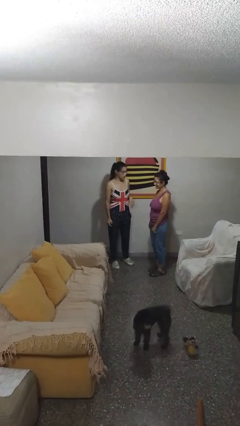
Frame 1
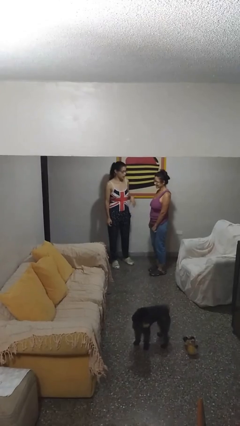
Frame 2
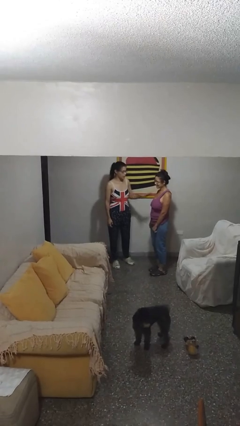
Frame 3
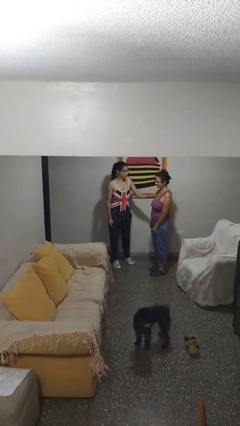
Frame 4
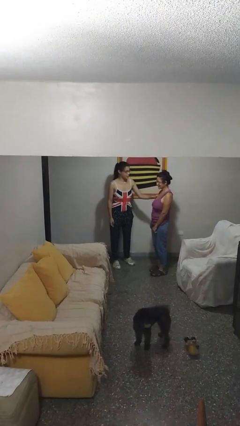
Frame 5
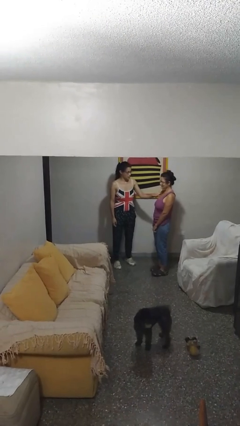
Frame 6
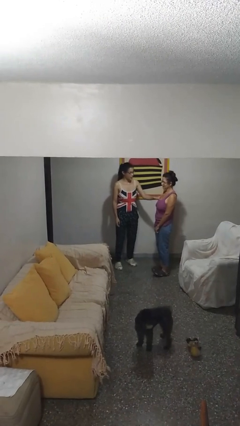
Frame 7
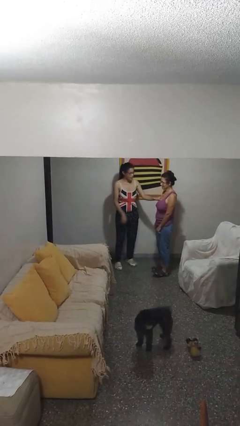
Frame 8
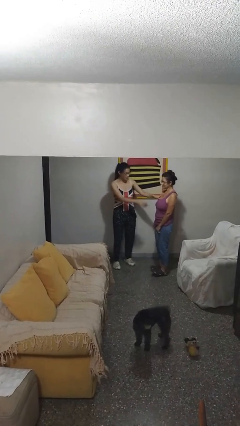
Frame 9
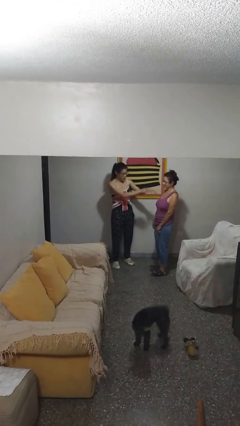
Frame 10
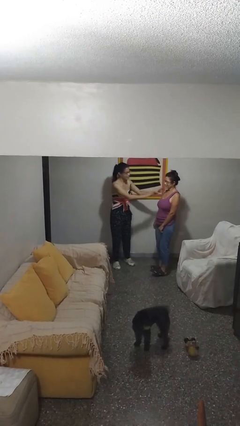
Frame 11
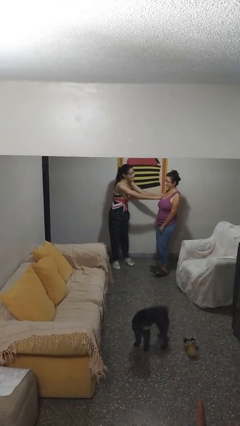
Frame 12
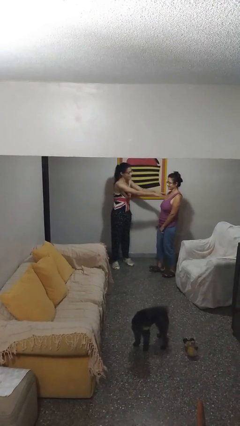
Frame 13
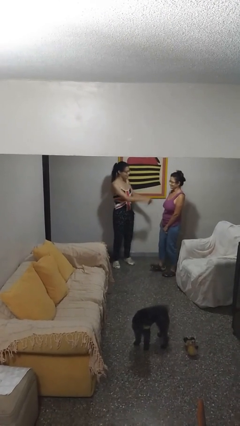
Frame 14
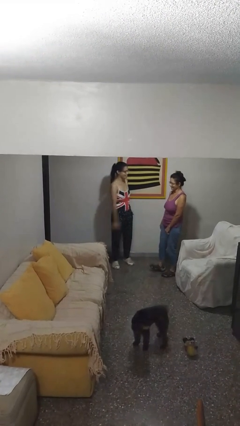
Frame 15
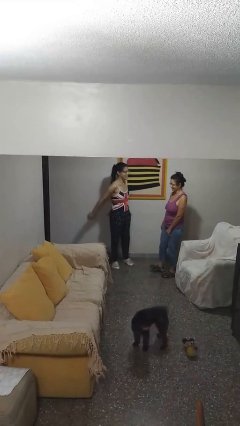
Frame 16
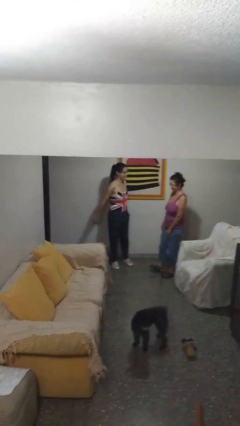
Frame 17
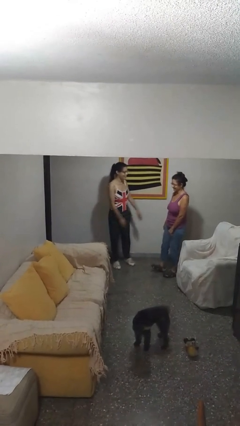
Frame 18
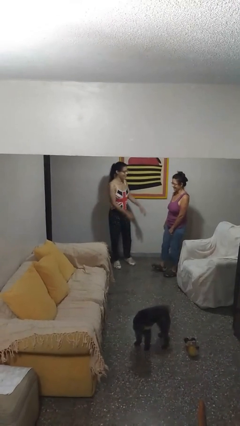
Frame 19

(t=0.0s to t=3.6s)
person shoves person

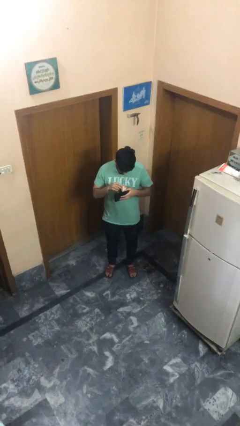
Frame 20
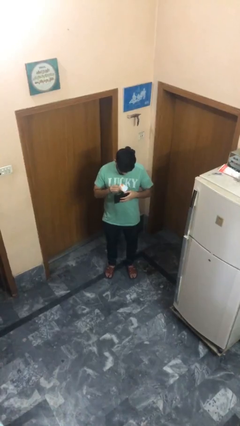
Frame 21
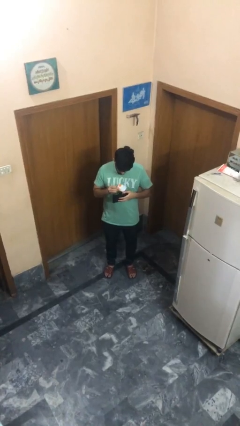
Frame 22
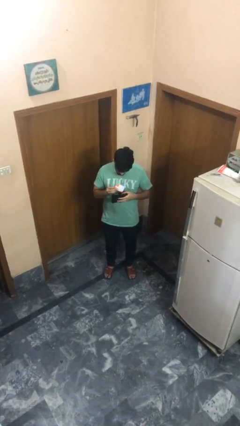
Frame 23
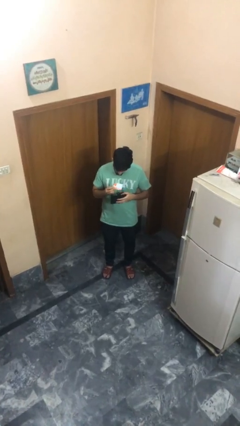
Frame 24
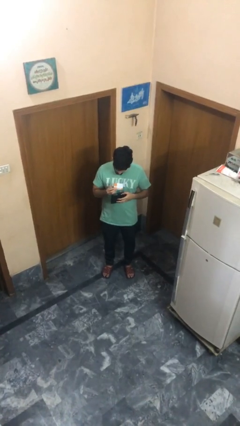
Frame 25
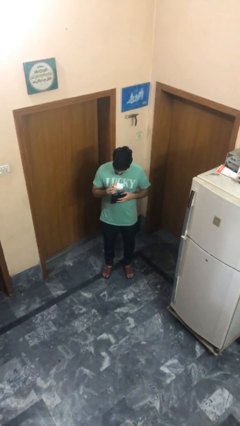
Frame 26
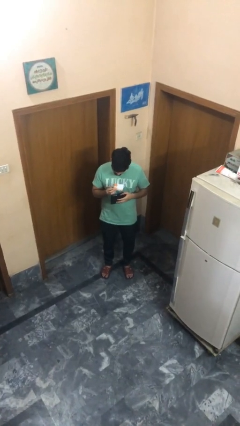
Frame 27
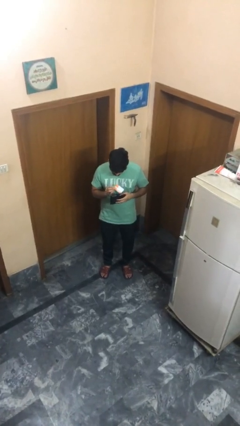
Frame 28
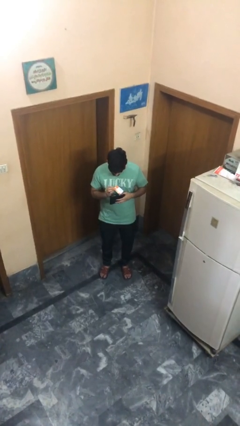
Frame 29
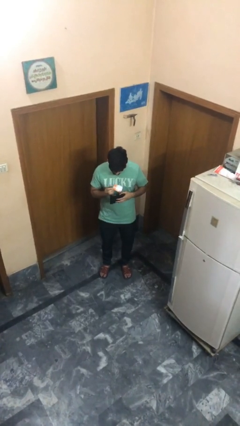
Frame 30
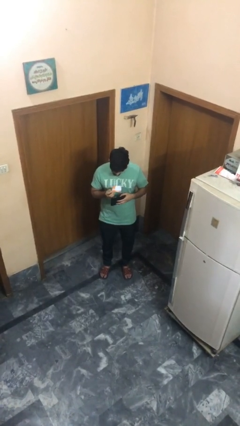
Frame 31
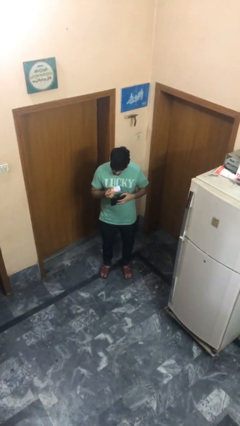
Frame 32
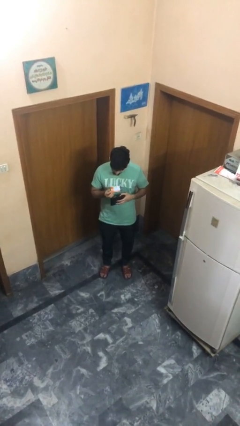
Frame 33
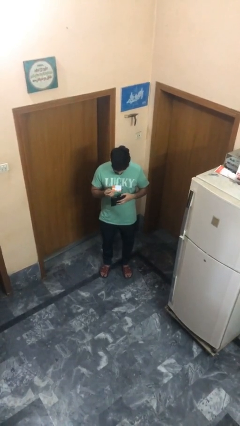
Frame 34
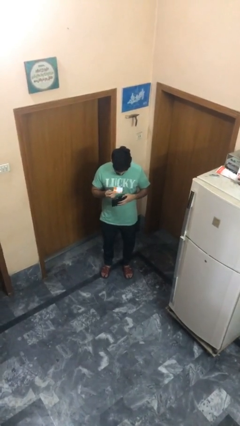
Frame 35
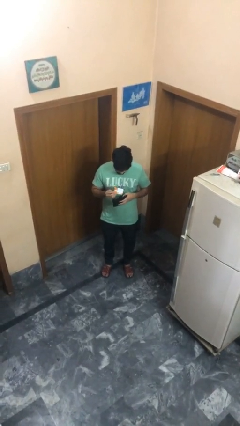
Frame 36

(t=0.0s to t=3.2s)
person takes object from purse

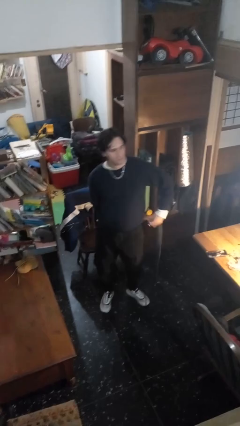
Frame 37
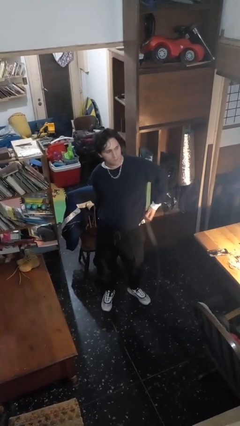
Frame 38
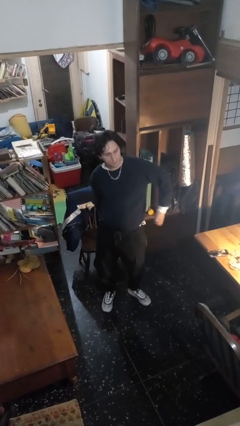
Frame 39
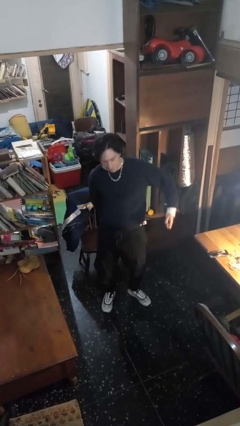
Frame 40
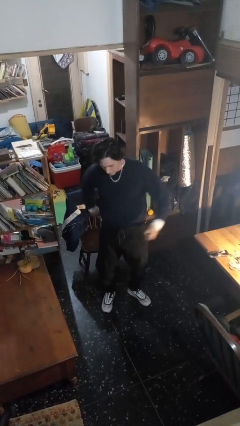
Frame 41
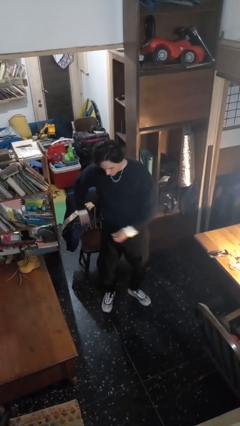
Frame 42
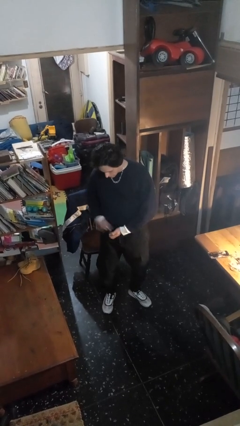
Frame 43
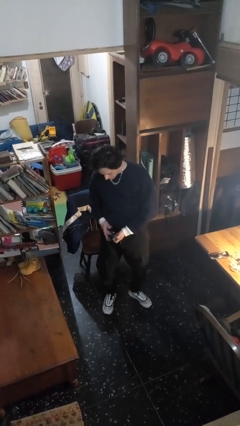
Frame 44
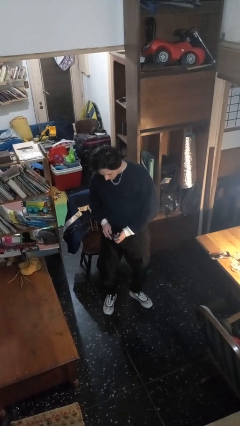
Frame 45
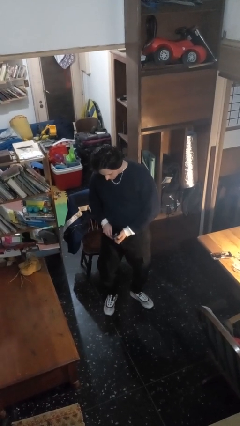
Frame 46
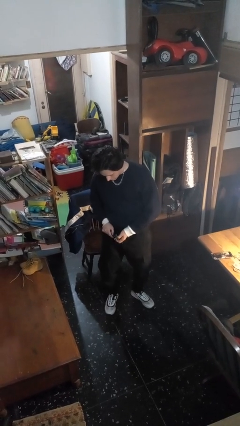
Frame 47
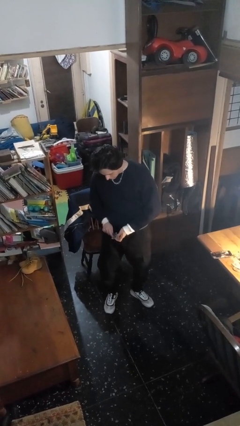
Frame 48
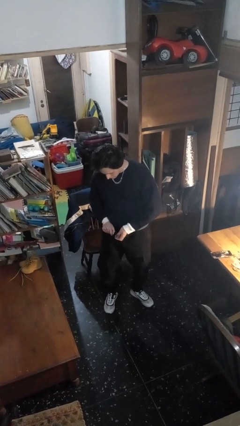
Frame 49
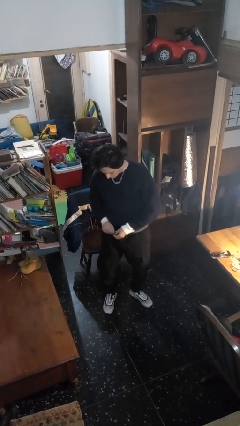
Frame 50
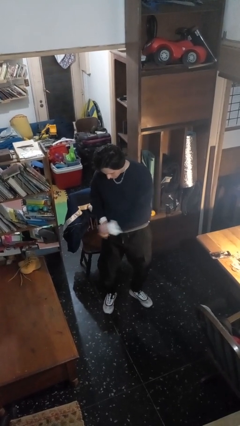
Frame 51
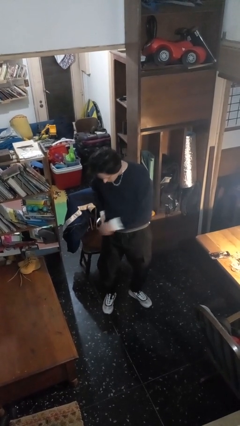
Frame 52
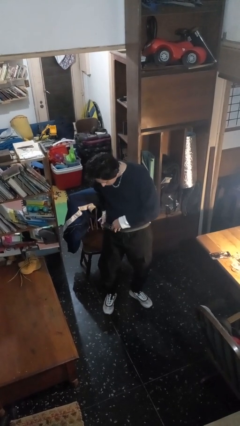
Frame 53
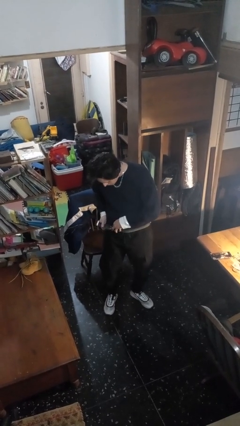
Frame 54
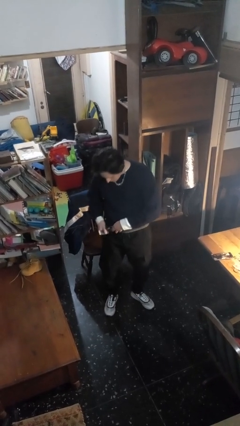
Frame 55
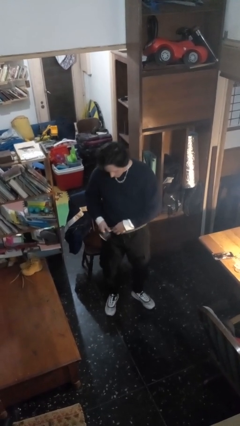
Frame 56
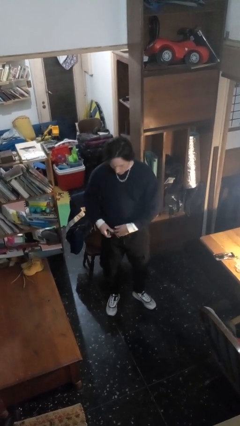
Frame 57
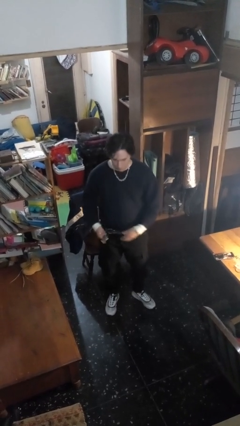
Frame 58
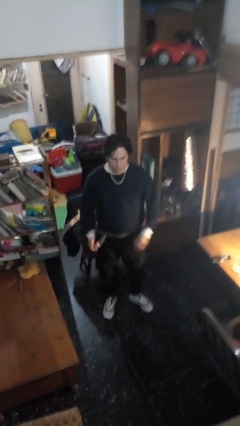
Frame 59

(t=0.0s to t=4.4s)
person puts on belt

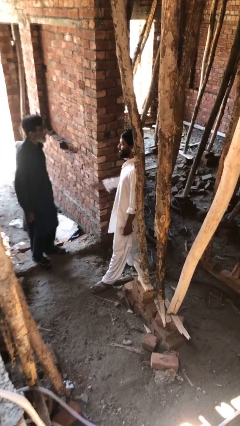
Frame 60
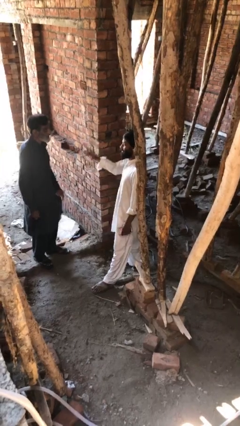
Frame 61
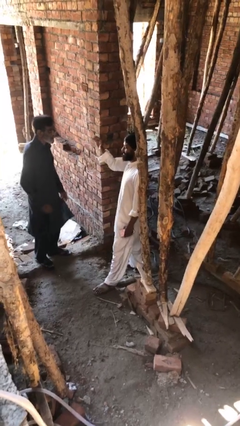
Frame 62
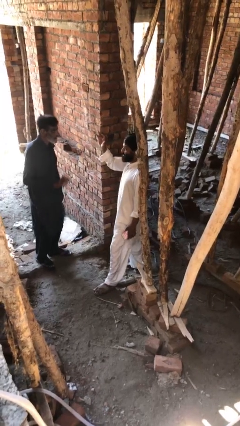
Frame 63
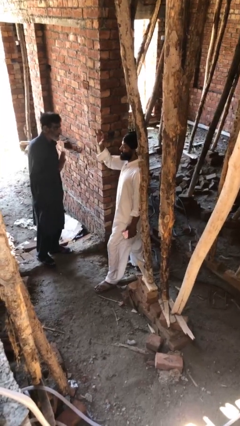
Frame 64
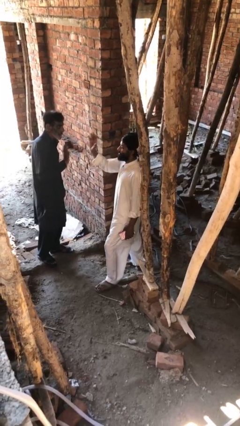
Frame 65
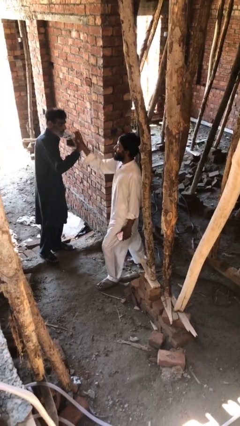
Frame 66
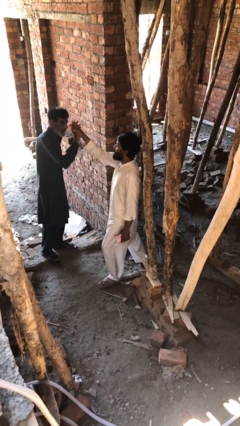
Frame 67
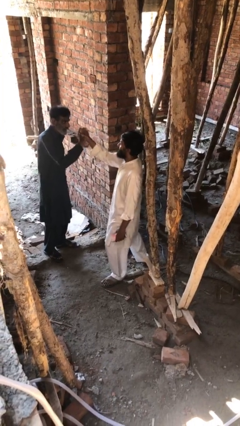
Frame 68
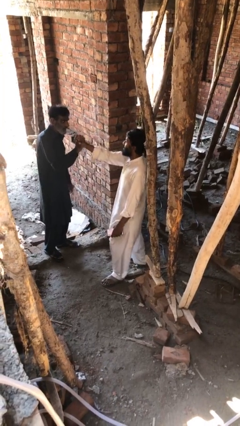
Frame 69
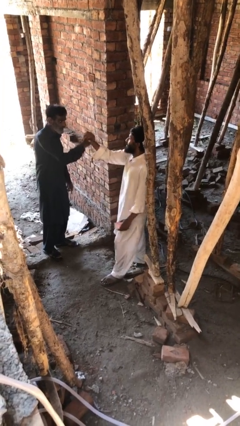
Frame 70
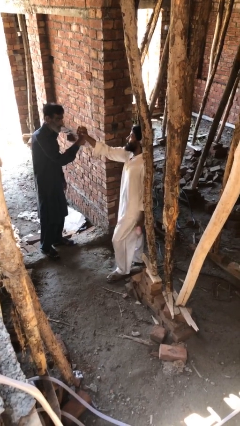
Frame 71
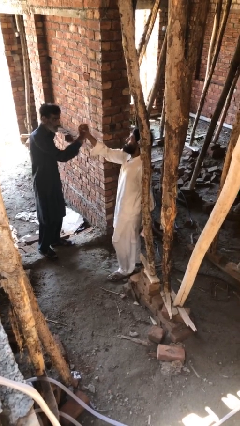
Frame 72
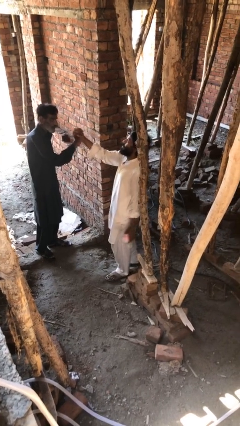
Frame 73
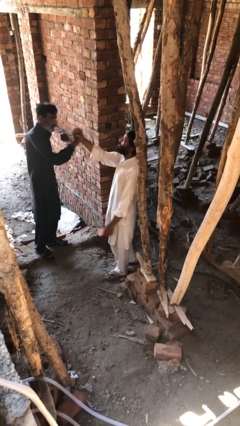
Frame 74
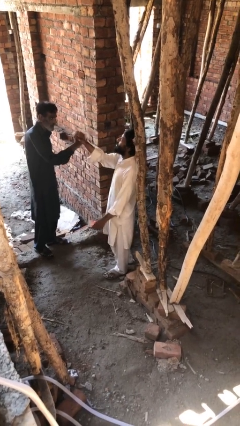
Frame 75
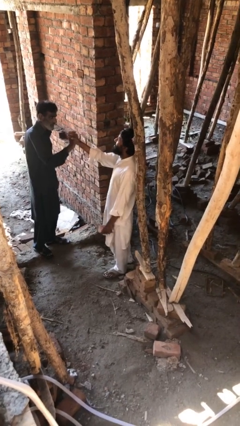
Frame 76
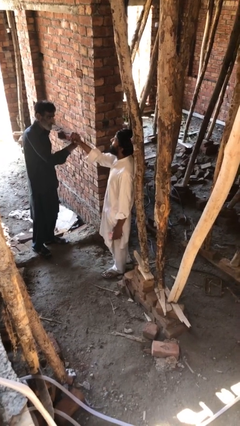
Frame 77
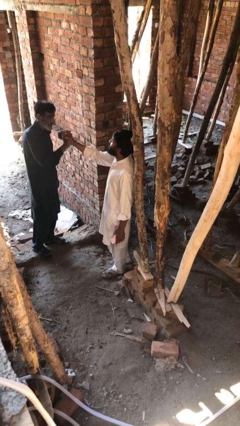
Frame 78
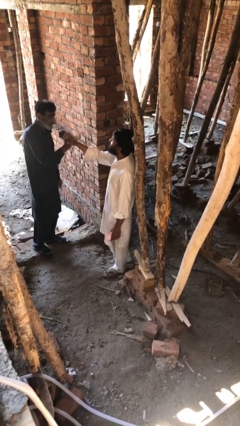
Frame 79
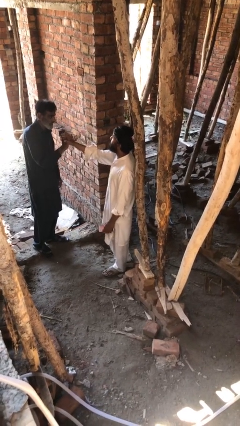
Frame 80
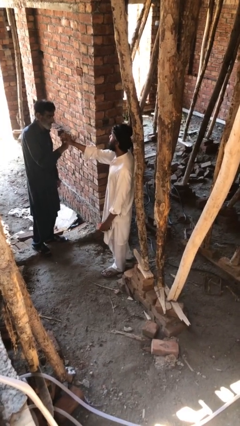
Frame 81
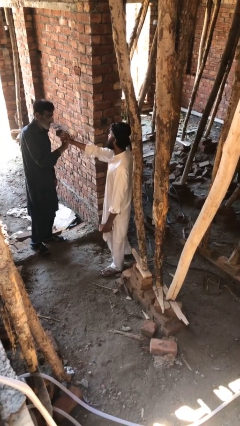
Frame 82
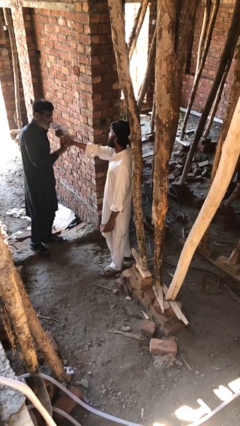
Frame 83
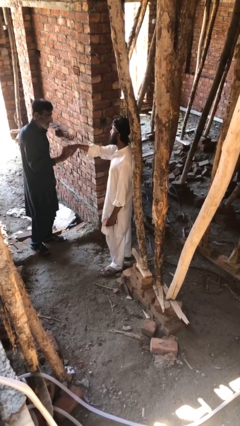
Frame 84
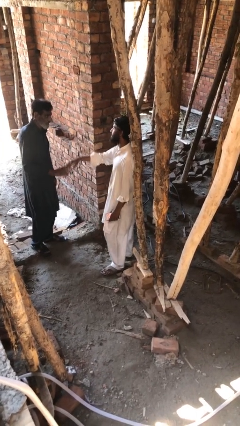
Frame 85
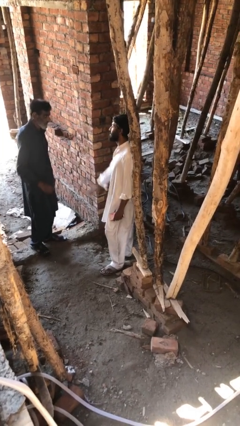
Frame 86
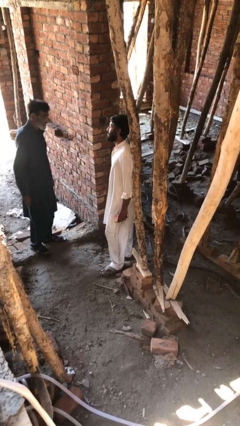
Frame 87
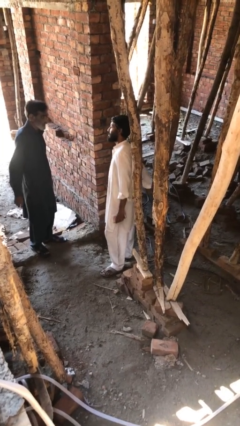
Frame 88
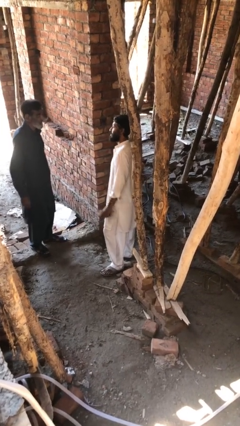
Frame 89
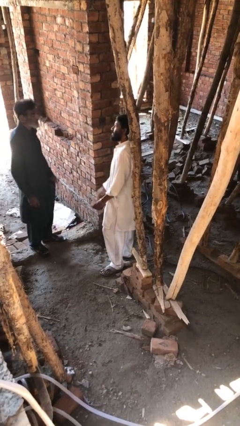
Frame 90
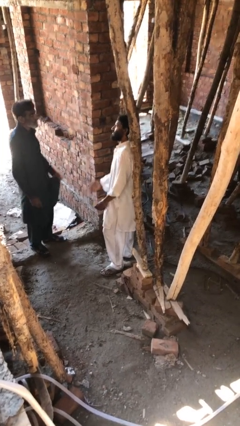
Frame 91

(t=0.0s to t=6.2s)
person highfives hand

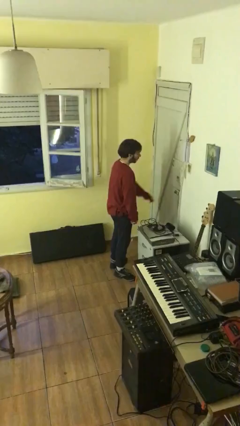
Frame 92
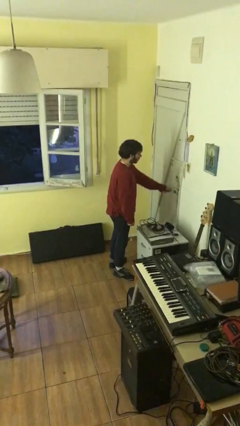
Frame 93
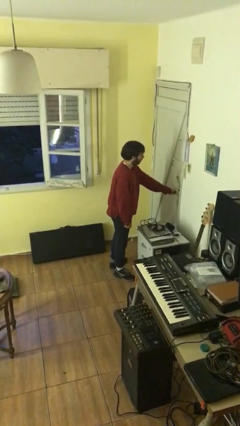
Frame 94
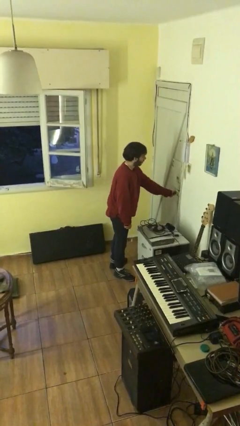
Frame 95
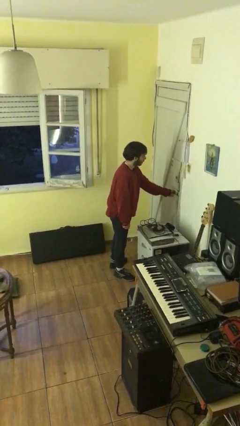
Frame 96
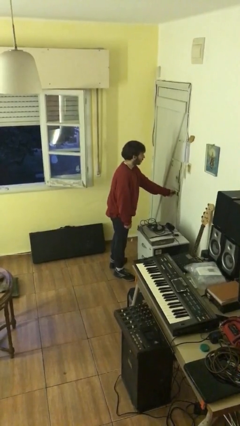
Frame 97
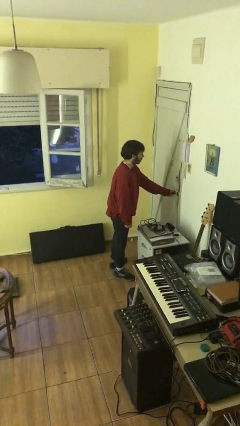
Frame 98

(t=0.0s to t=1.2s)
person unlocks door with keys
